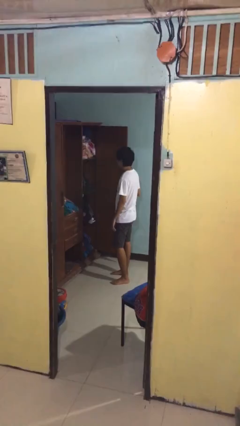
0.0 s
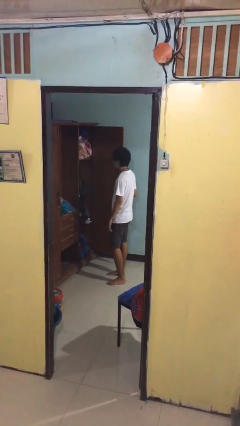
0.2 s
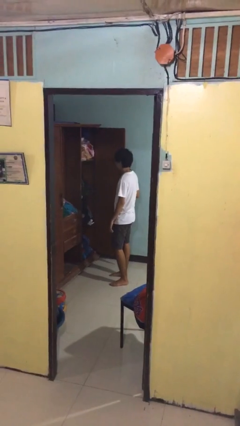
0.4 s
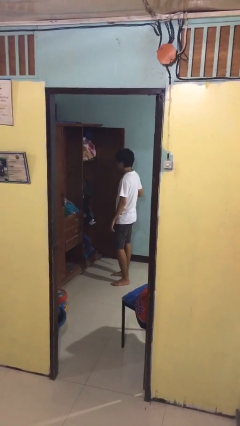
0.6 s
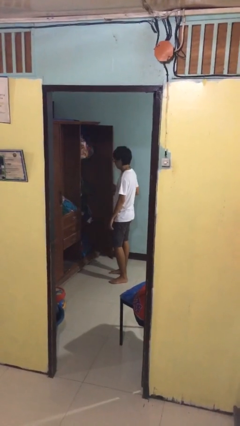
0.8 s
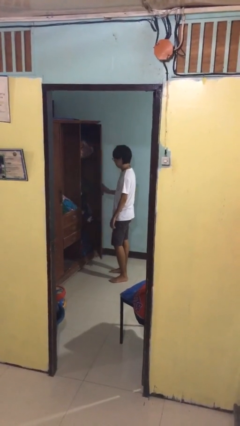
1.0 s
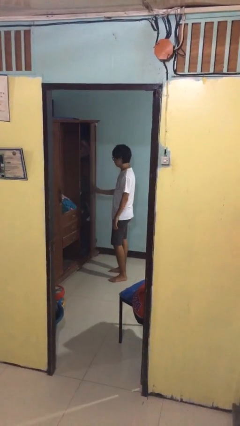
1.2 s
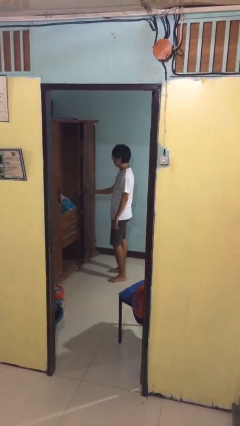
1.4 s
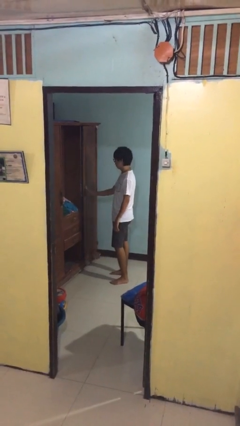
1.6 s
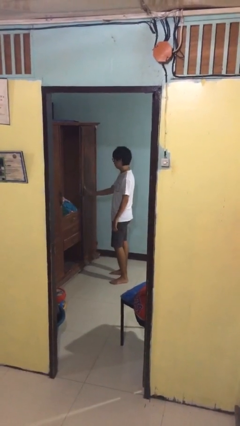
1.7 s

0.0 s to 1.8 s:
person closes closet door

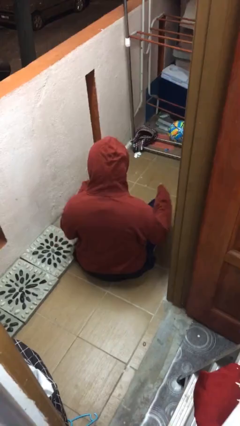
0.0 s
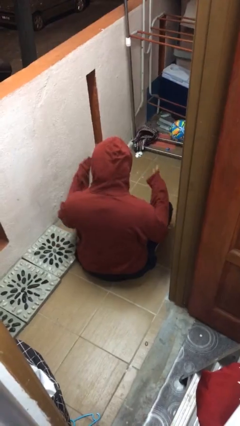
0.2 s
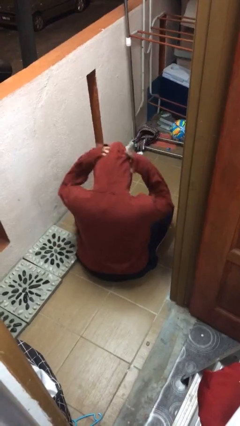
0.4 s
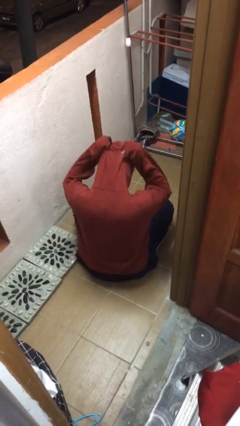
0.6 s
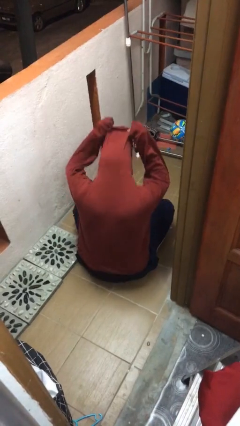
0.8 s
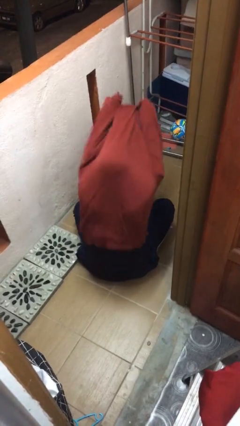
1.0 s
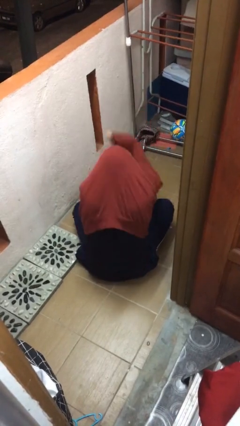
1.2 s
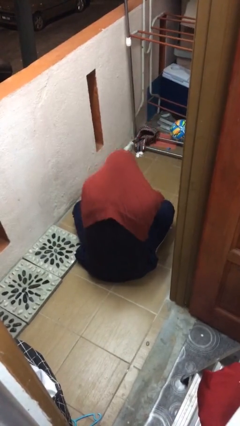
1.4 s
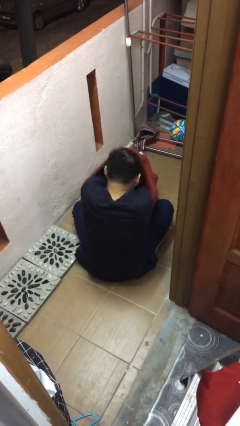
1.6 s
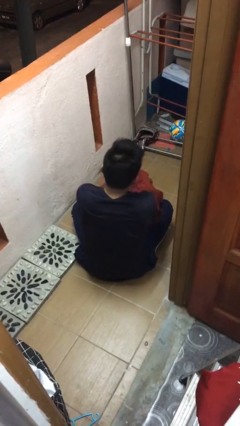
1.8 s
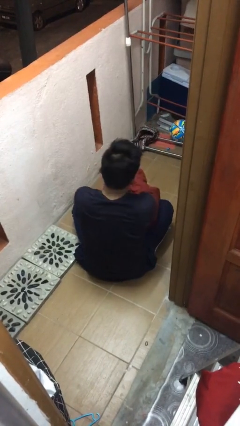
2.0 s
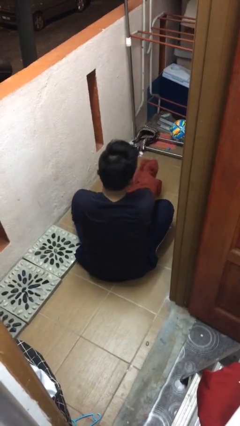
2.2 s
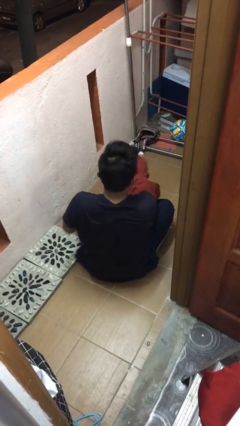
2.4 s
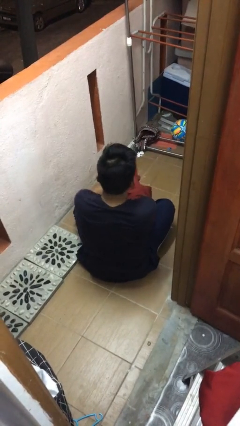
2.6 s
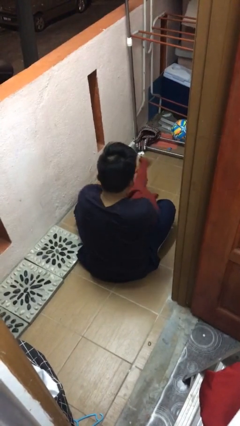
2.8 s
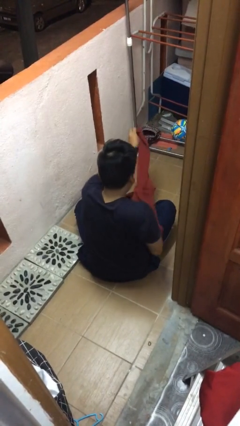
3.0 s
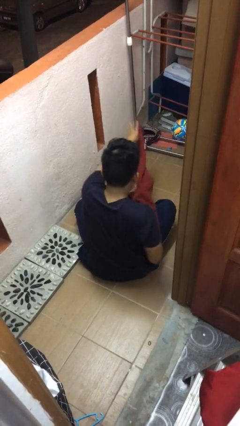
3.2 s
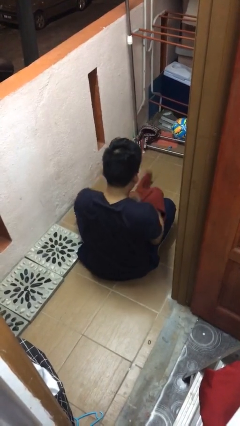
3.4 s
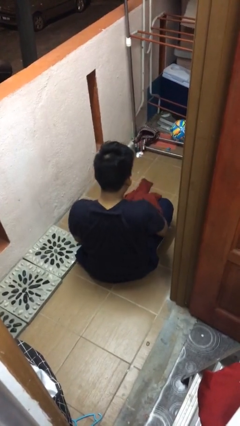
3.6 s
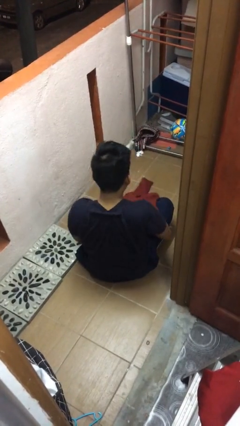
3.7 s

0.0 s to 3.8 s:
person takes off hoodie

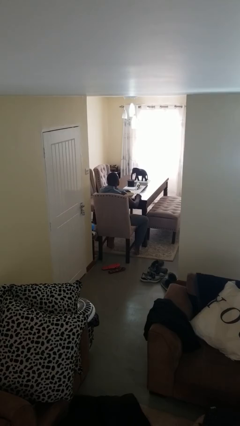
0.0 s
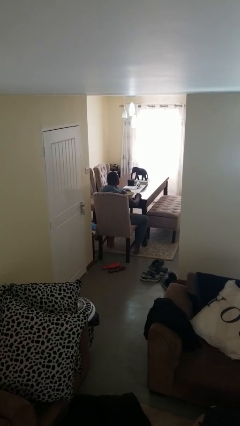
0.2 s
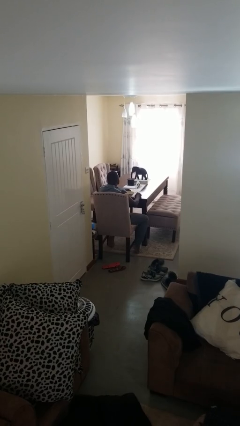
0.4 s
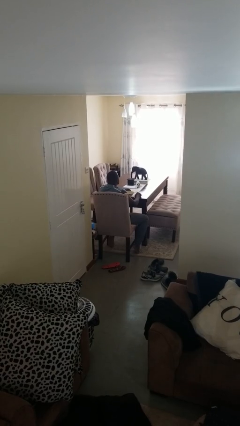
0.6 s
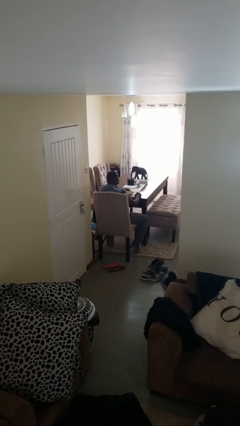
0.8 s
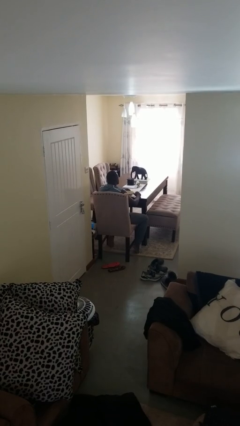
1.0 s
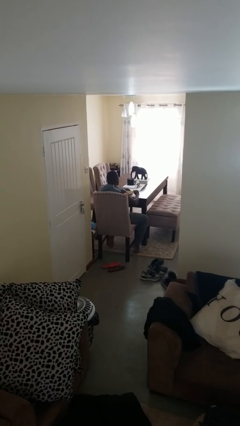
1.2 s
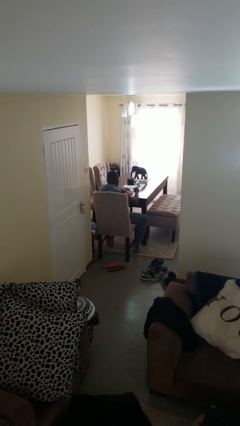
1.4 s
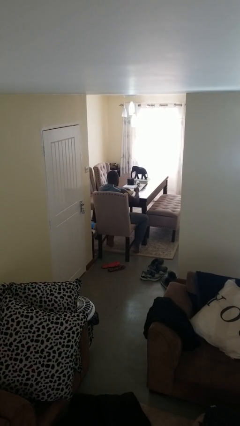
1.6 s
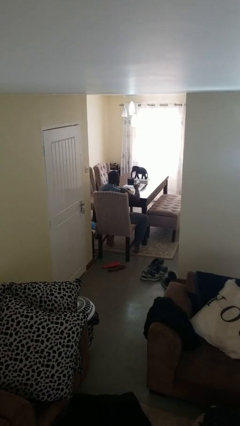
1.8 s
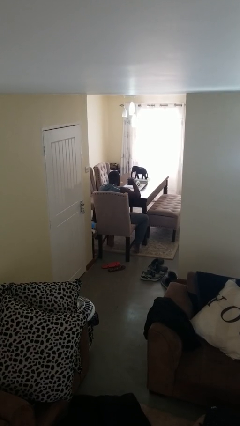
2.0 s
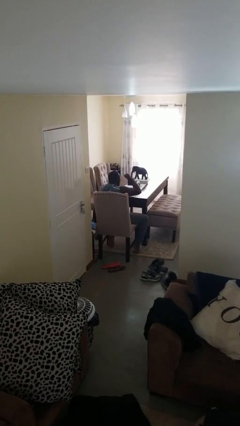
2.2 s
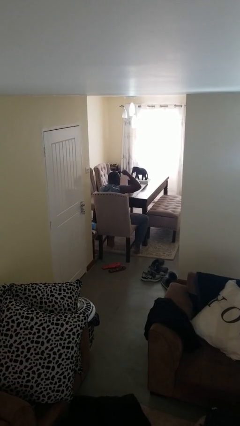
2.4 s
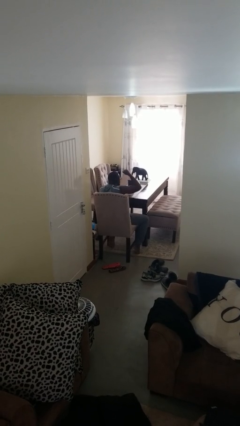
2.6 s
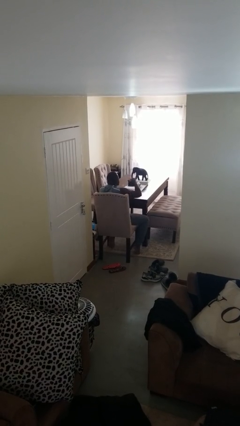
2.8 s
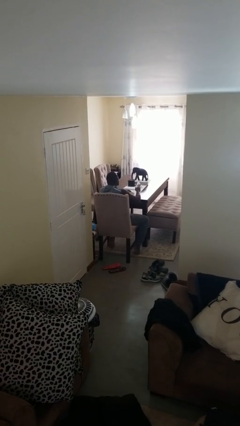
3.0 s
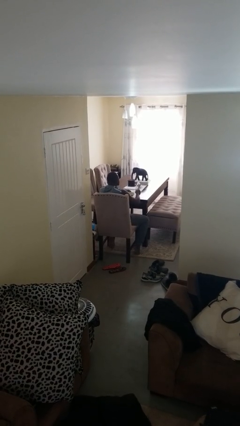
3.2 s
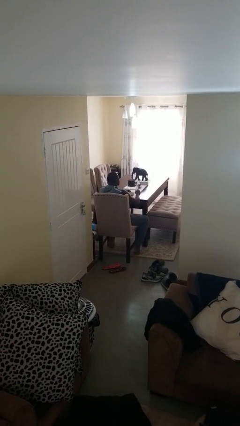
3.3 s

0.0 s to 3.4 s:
person eats with utensil

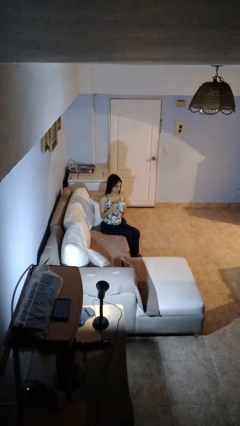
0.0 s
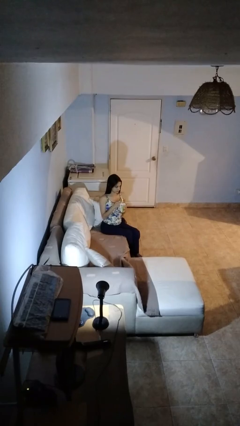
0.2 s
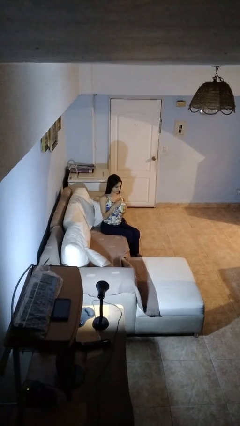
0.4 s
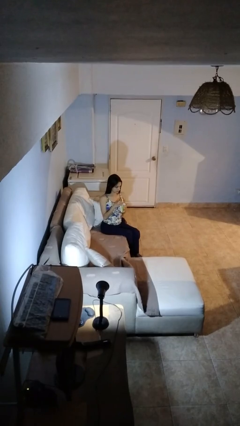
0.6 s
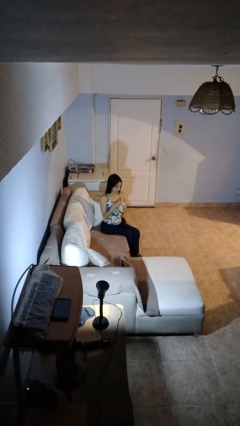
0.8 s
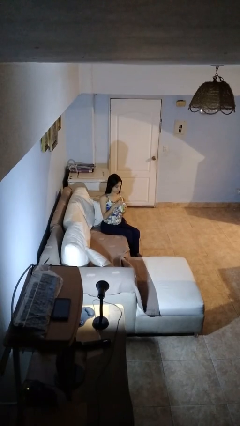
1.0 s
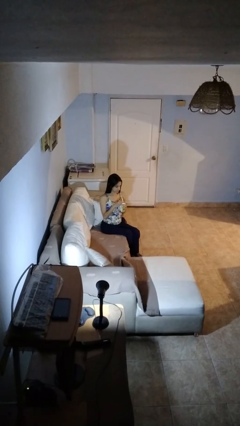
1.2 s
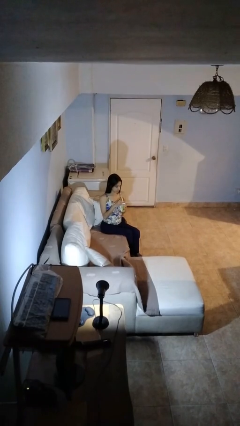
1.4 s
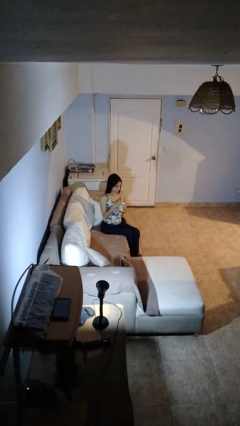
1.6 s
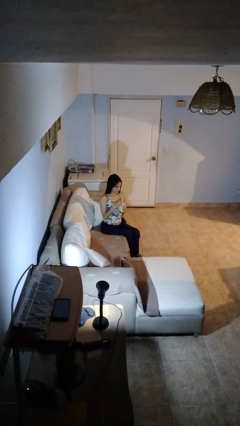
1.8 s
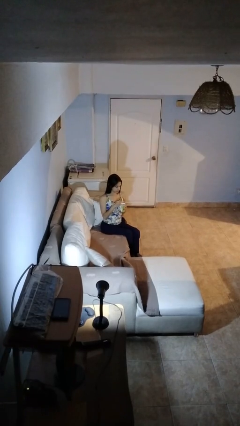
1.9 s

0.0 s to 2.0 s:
person stirs mug

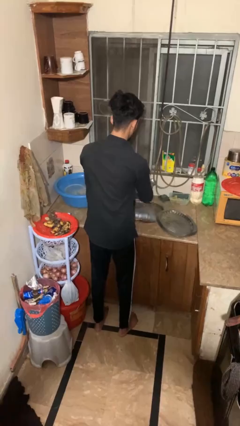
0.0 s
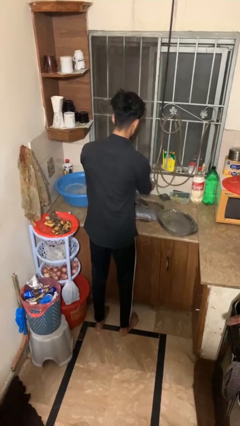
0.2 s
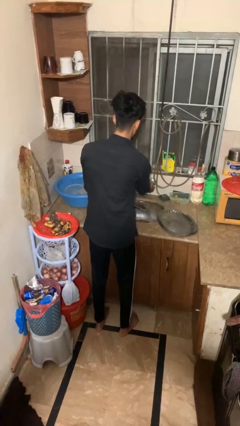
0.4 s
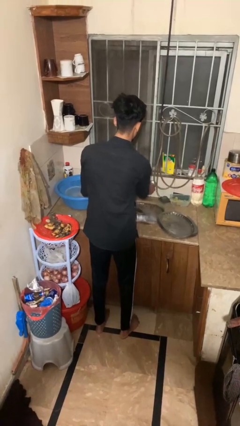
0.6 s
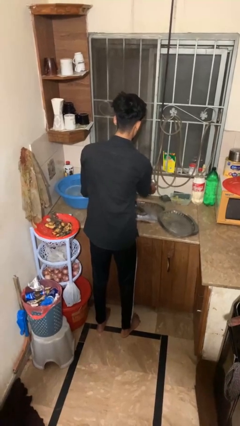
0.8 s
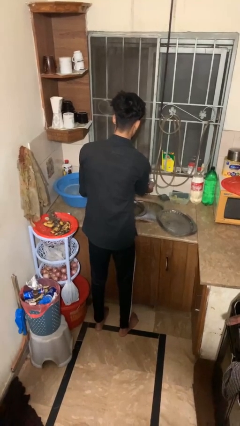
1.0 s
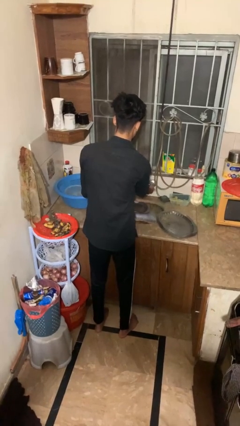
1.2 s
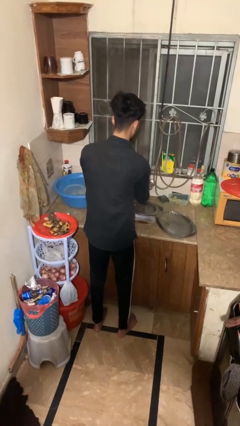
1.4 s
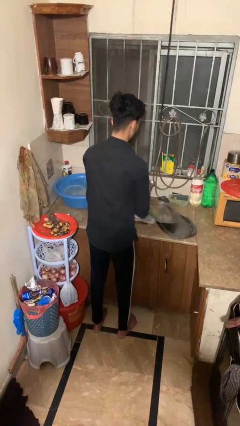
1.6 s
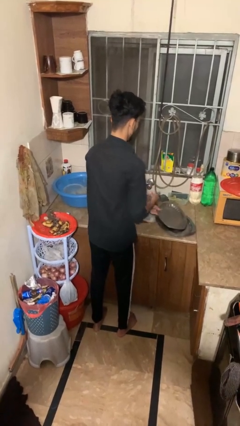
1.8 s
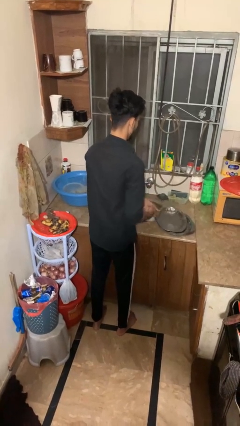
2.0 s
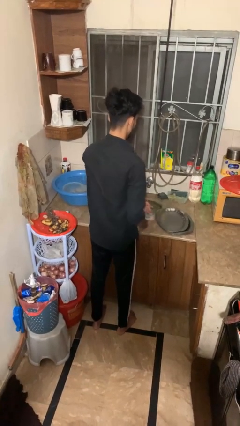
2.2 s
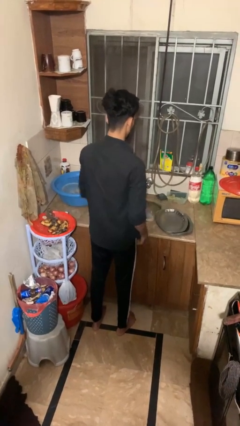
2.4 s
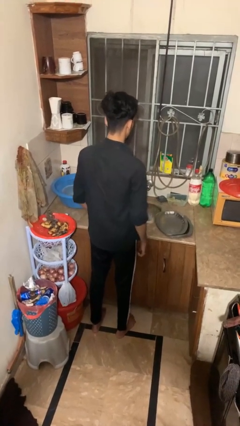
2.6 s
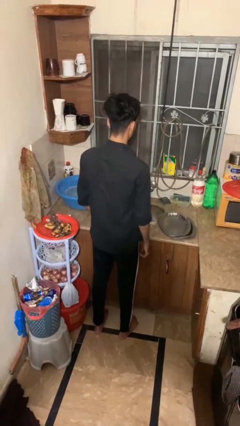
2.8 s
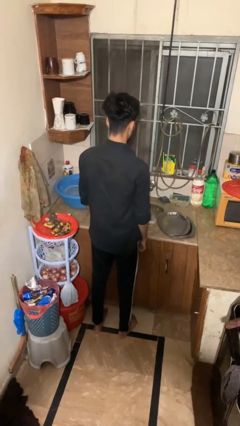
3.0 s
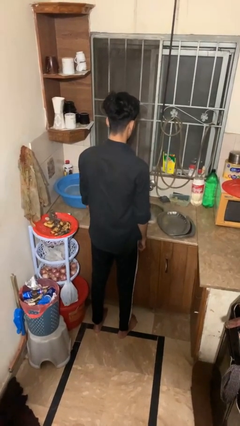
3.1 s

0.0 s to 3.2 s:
person closes dishwasher

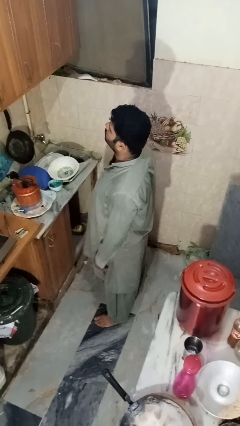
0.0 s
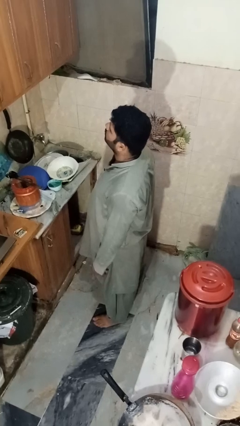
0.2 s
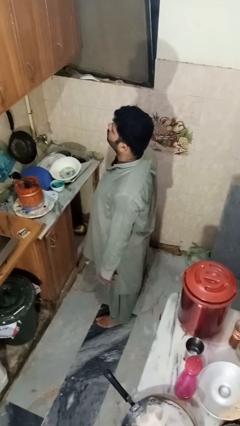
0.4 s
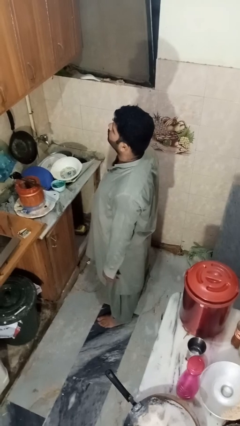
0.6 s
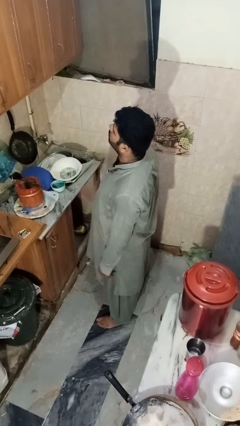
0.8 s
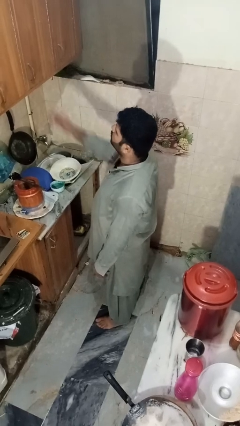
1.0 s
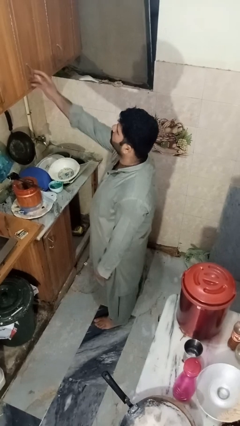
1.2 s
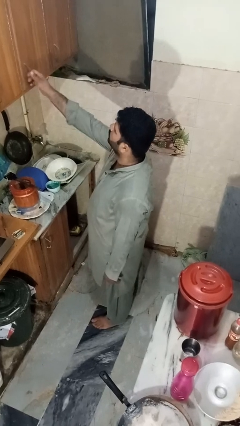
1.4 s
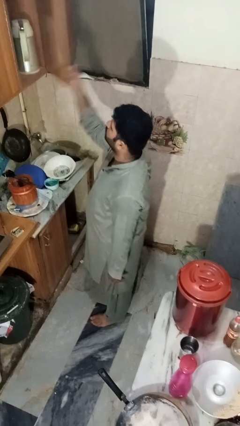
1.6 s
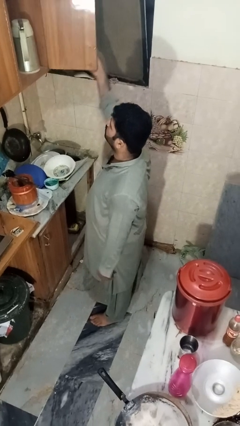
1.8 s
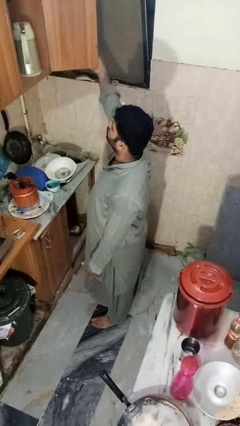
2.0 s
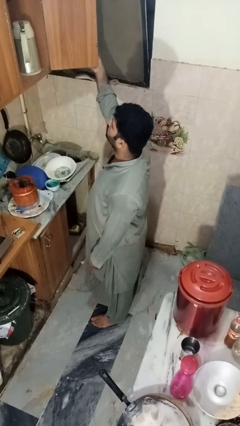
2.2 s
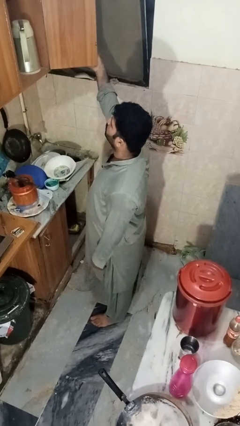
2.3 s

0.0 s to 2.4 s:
person opens cabinet

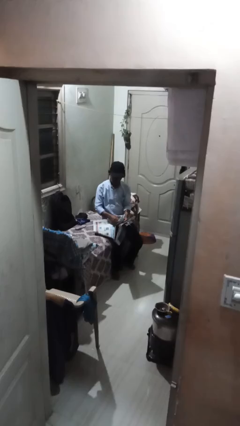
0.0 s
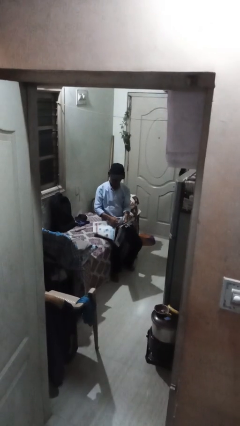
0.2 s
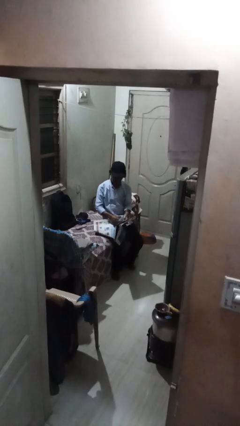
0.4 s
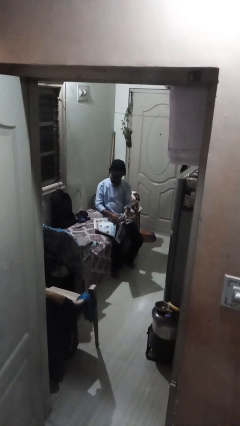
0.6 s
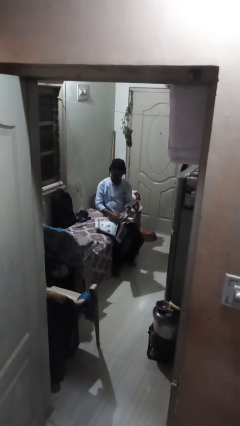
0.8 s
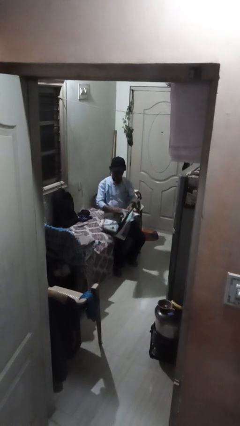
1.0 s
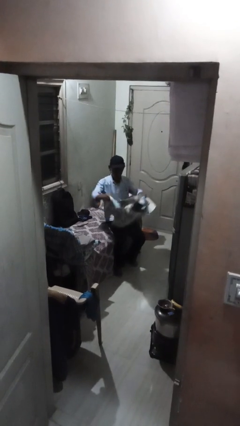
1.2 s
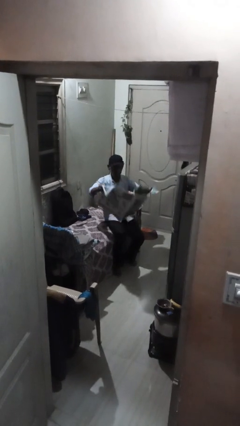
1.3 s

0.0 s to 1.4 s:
person reads newspaper
